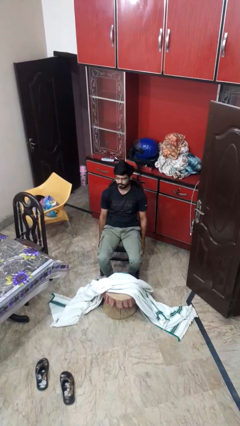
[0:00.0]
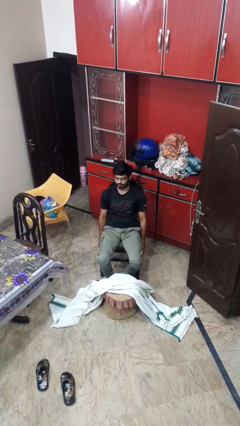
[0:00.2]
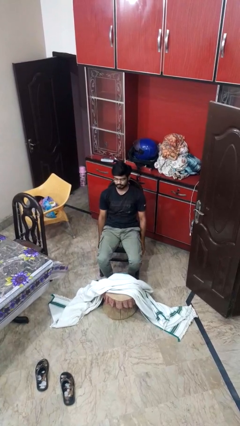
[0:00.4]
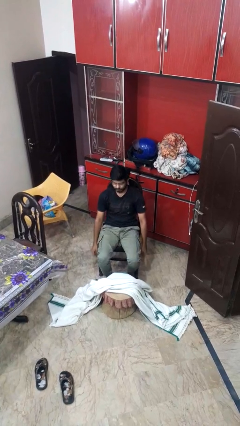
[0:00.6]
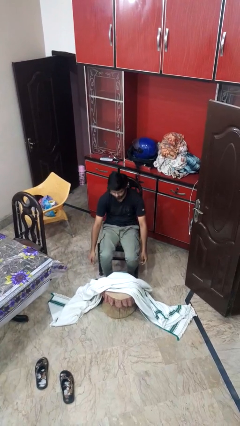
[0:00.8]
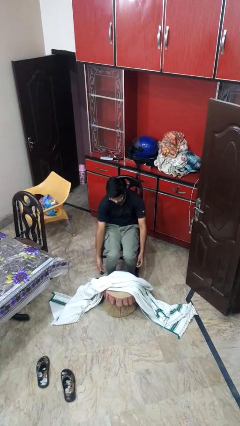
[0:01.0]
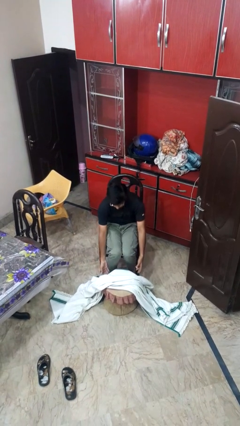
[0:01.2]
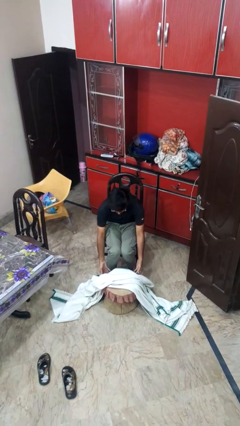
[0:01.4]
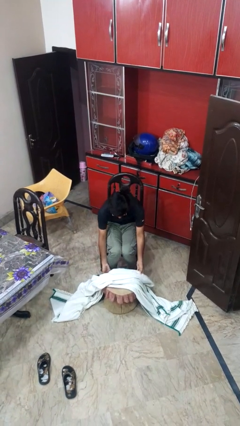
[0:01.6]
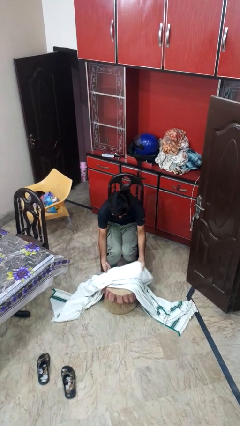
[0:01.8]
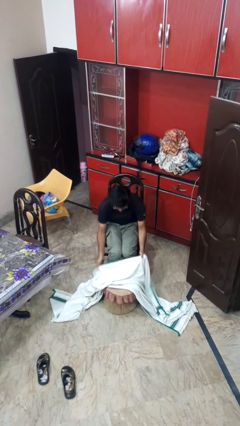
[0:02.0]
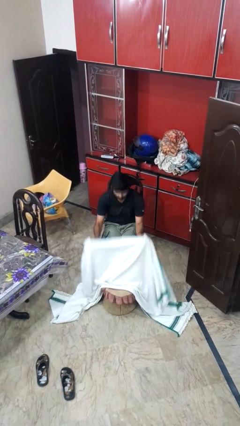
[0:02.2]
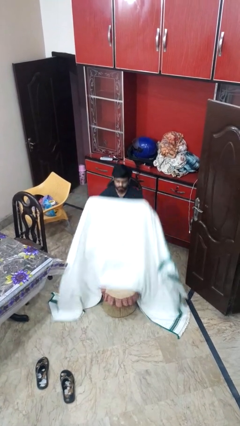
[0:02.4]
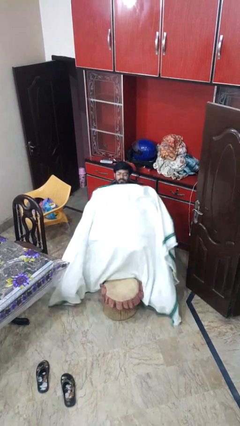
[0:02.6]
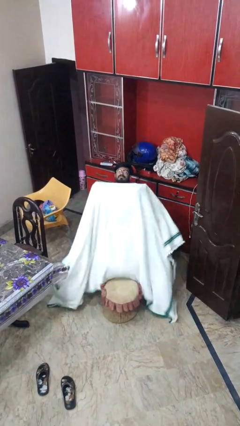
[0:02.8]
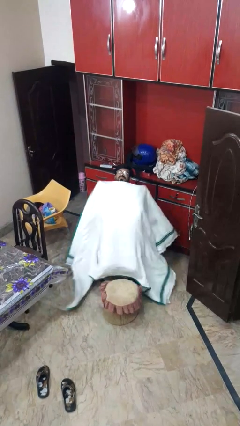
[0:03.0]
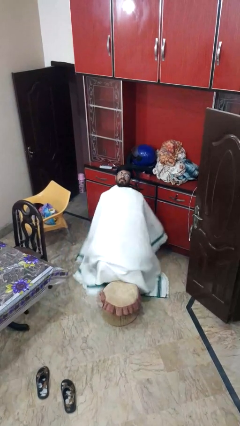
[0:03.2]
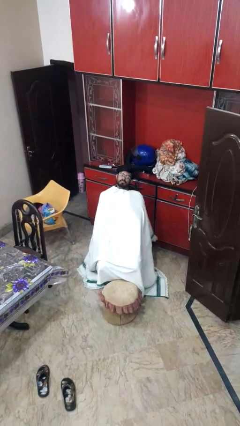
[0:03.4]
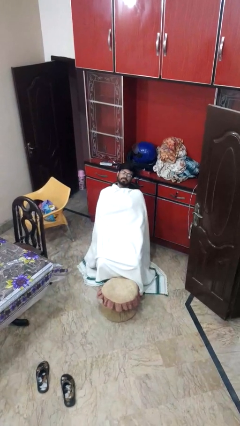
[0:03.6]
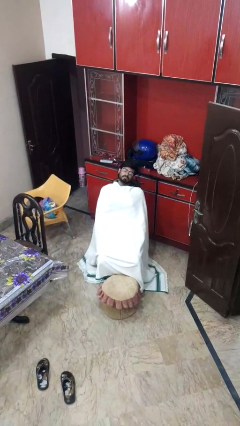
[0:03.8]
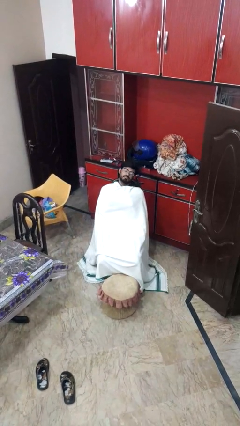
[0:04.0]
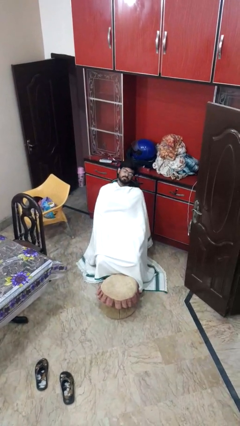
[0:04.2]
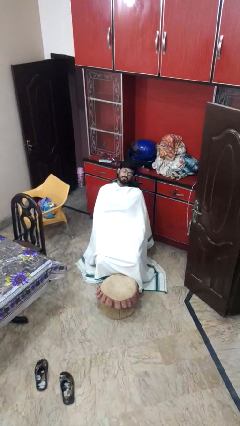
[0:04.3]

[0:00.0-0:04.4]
person covers with blanket

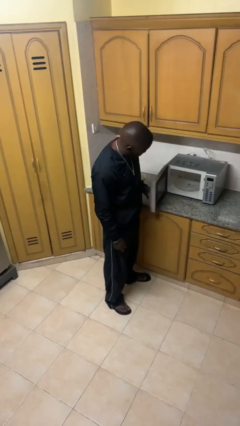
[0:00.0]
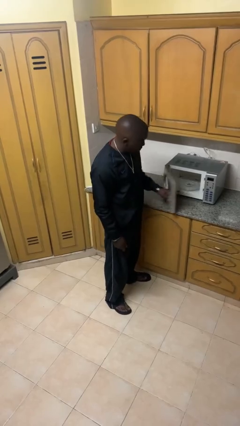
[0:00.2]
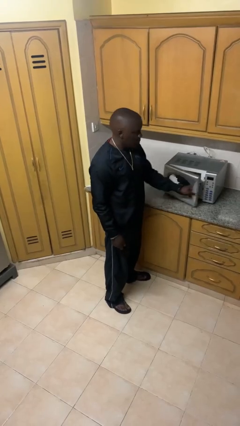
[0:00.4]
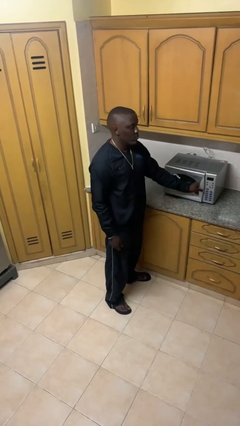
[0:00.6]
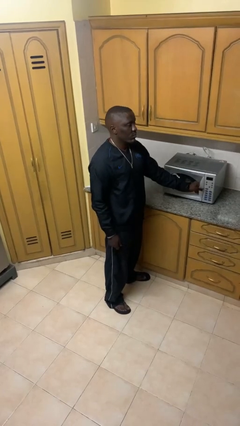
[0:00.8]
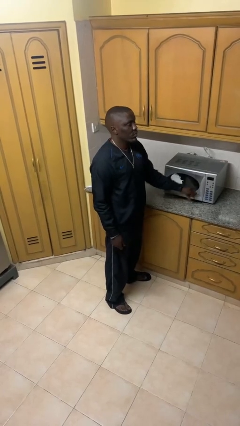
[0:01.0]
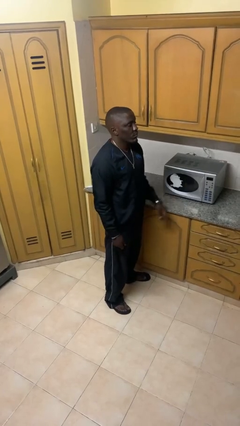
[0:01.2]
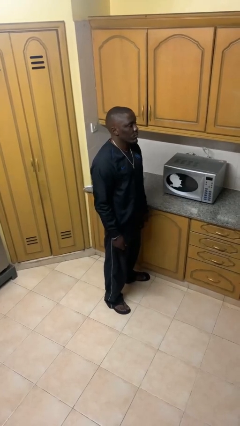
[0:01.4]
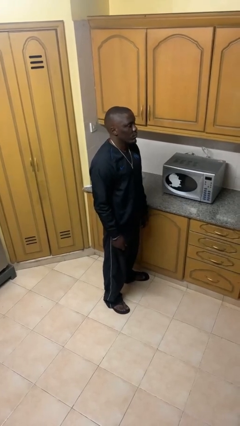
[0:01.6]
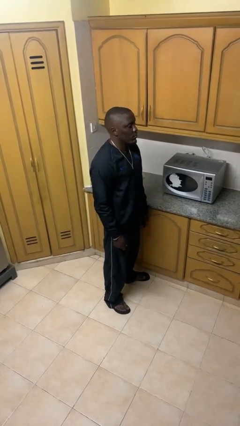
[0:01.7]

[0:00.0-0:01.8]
person closes microwave

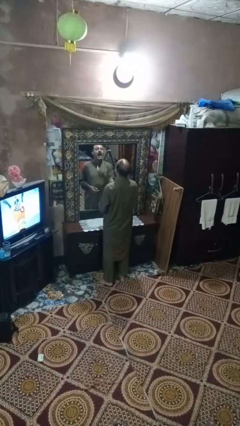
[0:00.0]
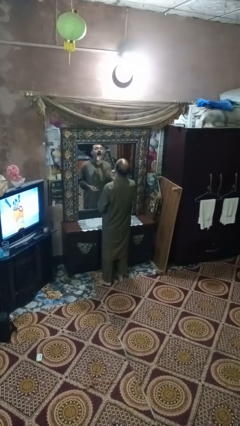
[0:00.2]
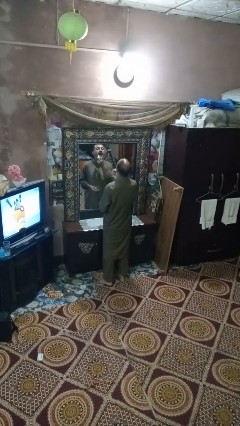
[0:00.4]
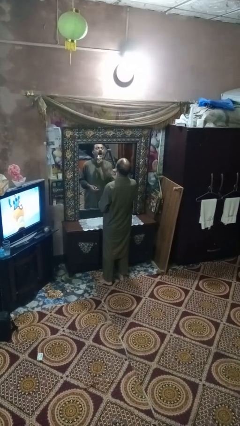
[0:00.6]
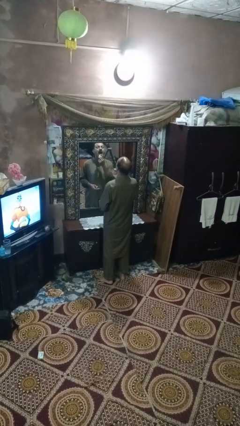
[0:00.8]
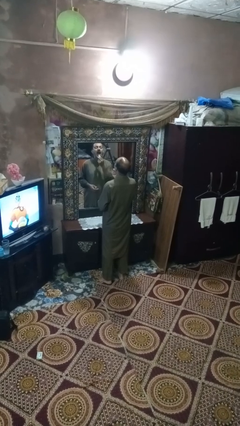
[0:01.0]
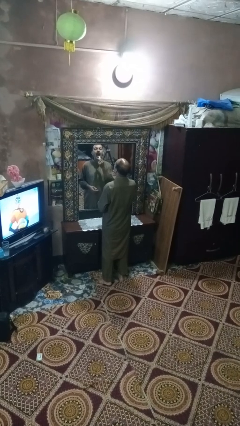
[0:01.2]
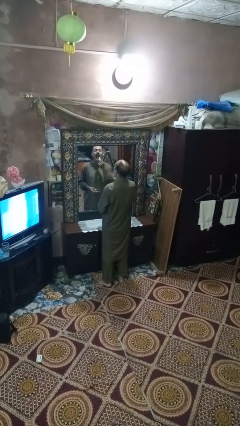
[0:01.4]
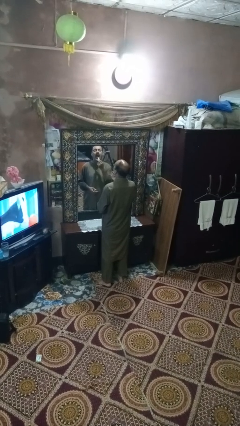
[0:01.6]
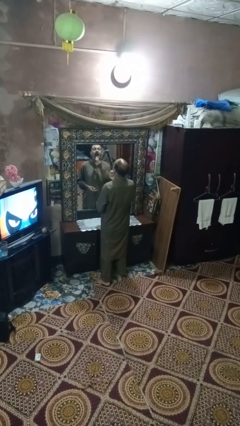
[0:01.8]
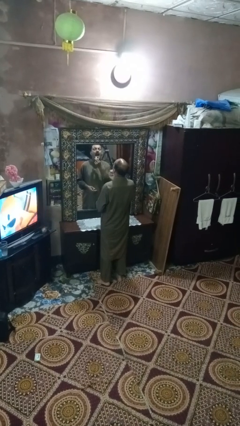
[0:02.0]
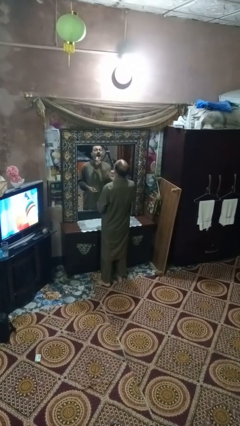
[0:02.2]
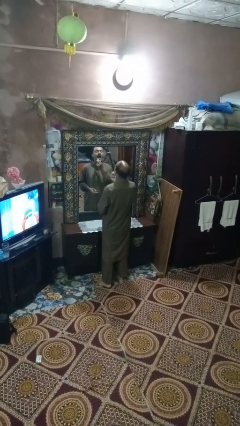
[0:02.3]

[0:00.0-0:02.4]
person applies lip makeup

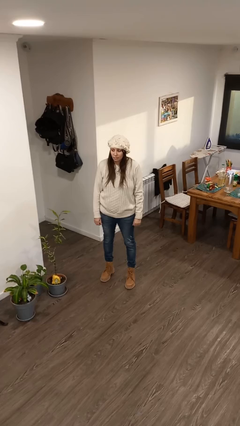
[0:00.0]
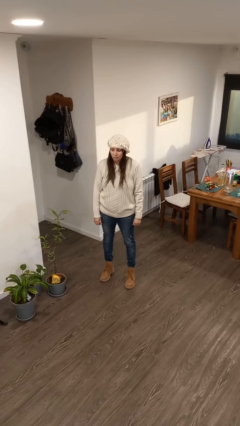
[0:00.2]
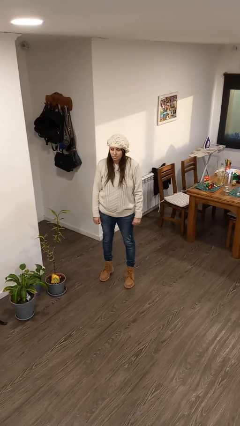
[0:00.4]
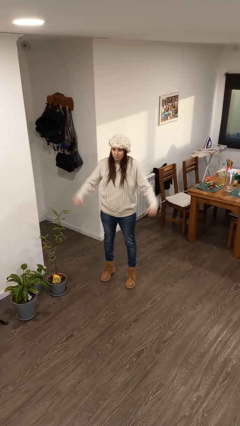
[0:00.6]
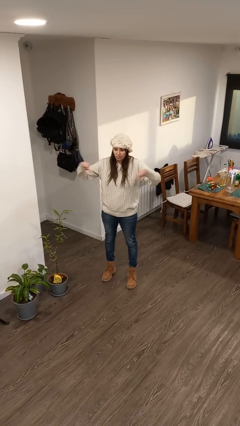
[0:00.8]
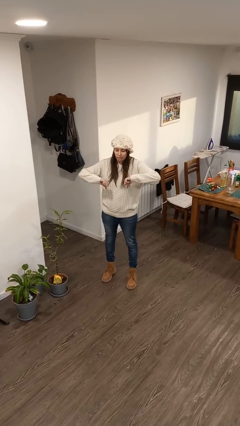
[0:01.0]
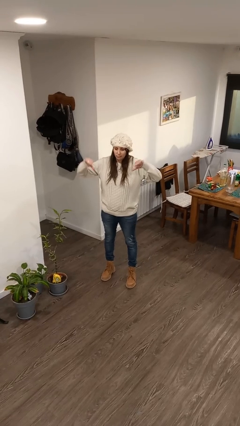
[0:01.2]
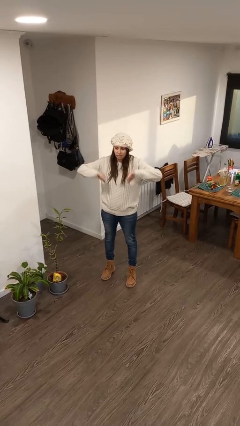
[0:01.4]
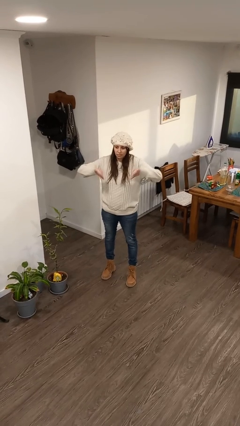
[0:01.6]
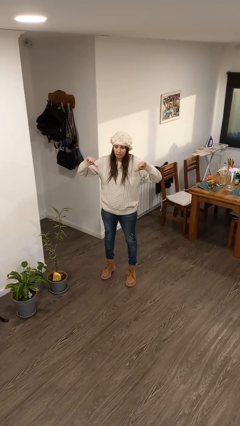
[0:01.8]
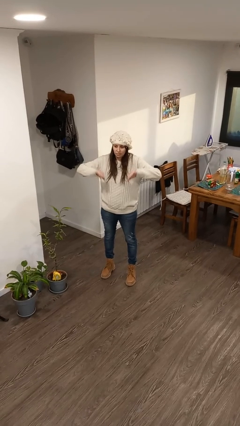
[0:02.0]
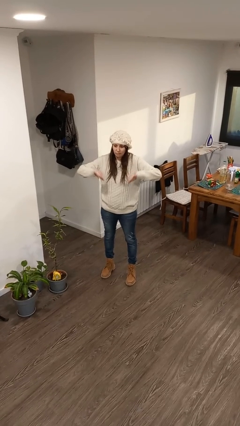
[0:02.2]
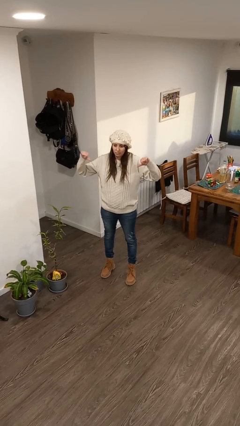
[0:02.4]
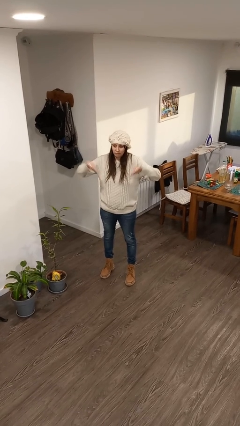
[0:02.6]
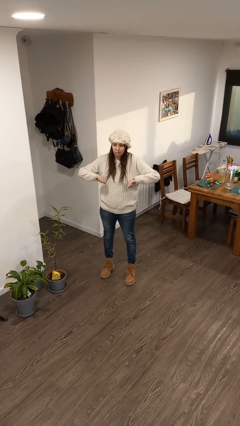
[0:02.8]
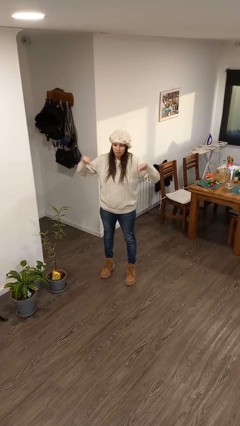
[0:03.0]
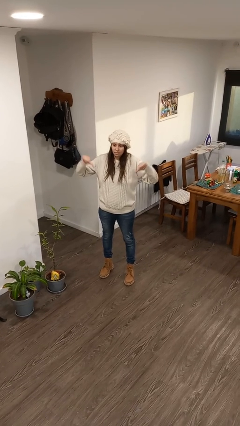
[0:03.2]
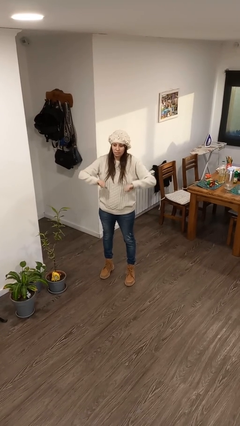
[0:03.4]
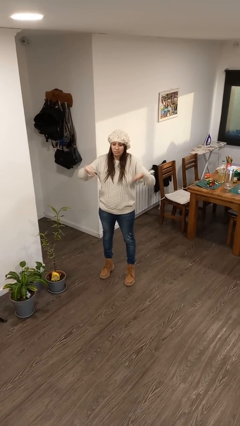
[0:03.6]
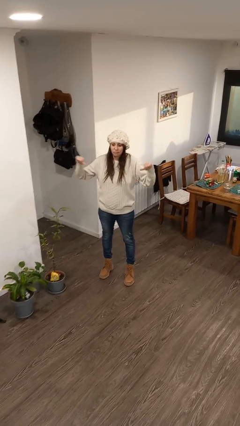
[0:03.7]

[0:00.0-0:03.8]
person gestures thumbs down

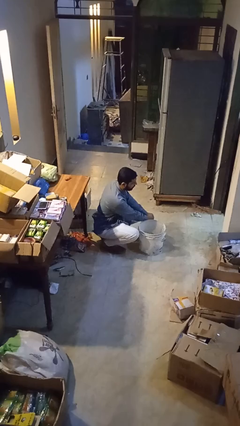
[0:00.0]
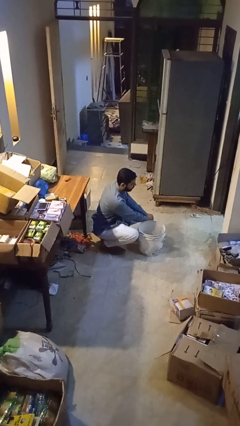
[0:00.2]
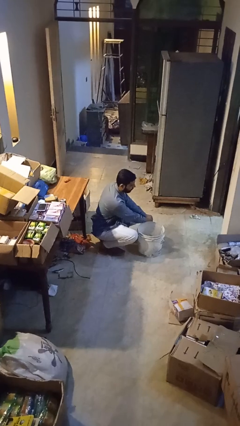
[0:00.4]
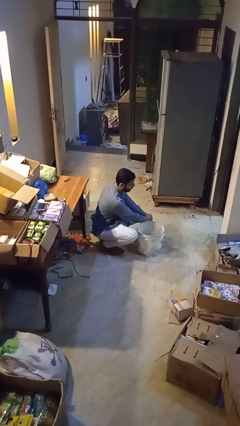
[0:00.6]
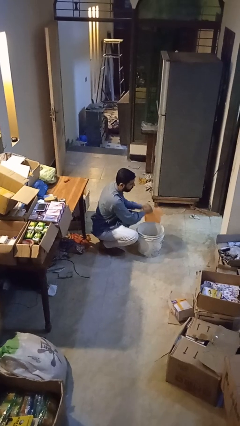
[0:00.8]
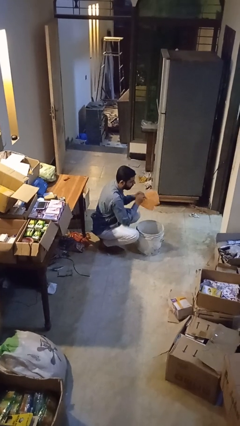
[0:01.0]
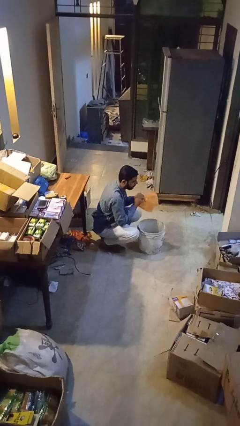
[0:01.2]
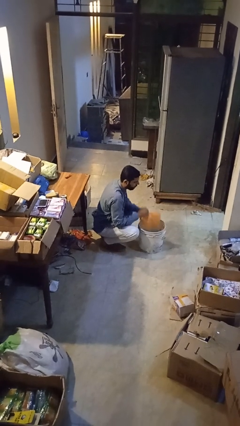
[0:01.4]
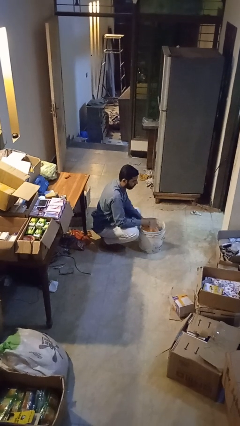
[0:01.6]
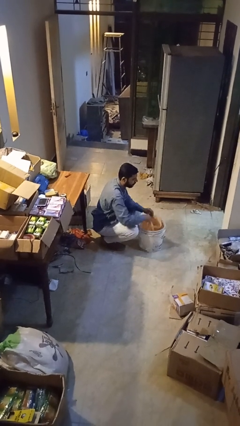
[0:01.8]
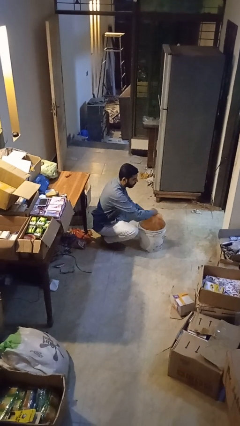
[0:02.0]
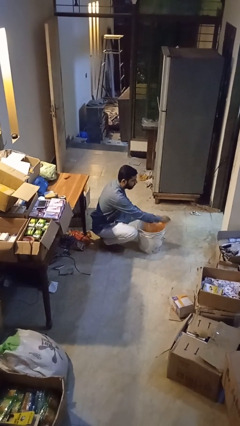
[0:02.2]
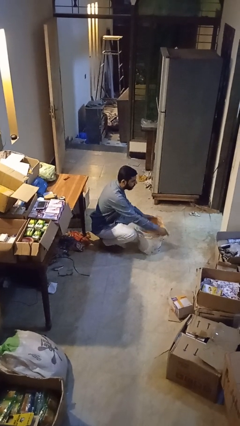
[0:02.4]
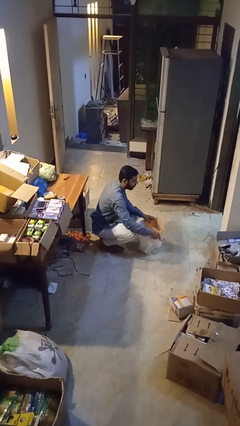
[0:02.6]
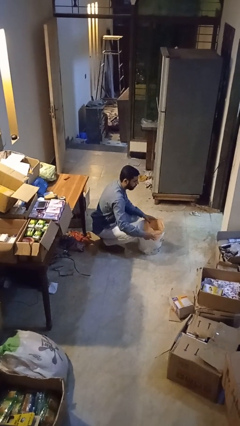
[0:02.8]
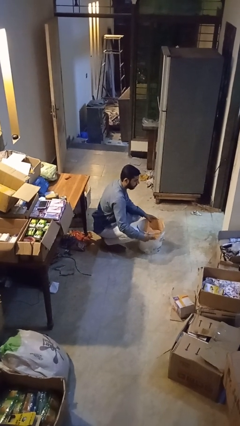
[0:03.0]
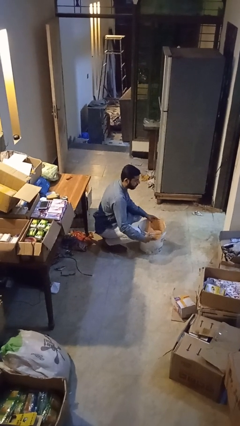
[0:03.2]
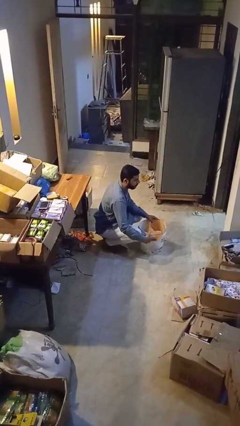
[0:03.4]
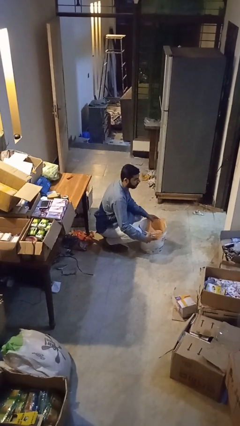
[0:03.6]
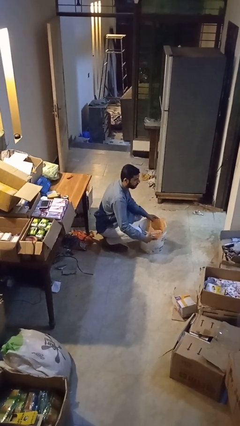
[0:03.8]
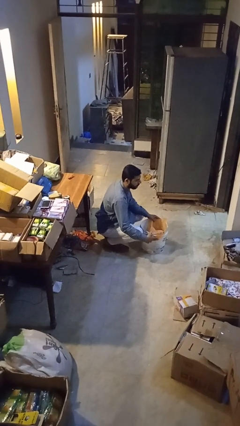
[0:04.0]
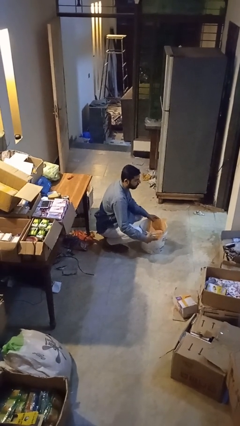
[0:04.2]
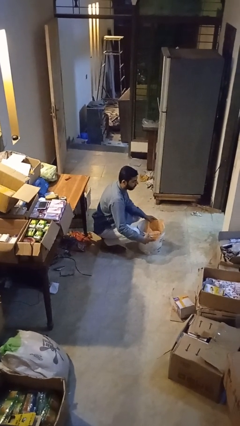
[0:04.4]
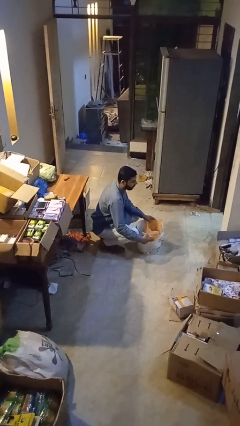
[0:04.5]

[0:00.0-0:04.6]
person inserts trashbag into trashcan

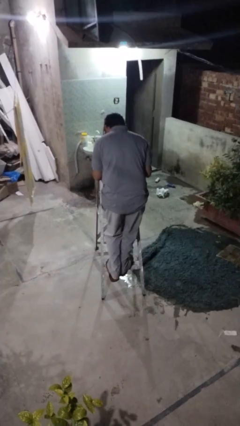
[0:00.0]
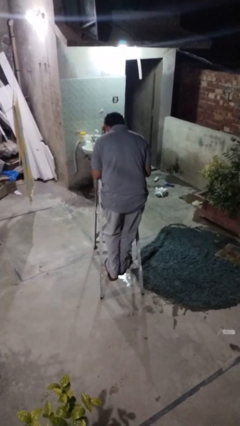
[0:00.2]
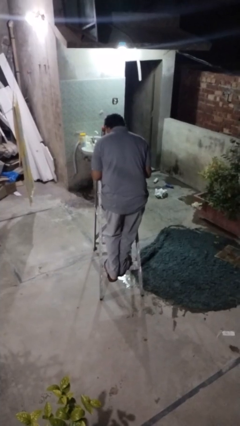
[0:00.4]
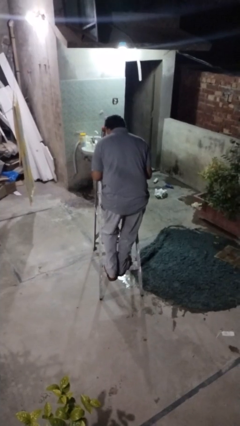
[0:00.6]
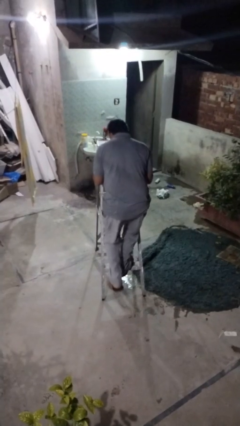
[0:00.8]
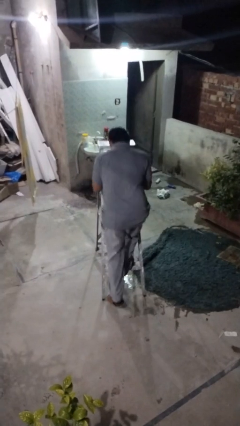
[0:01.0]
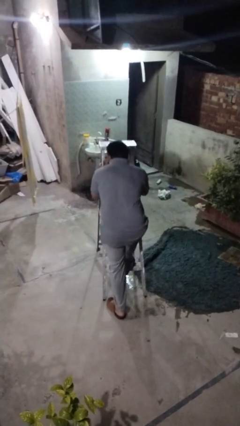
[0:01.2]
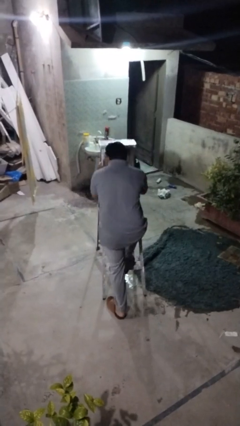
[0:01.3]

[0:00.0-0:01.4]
person climbs down ladder
